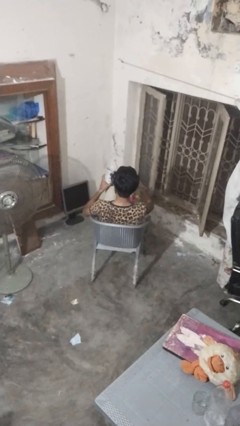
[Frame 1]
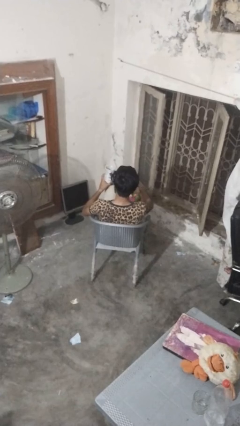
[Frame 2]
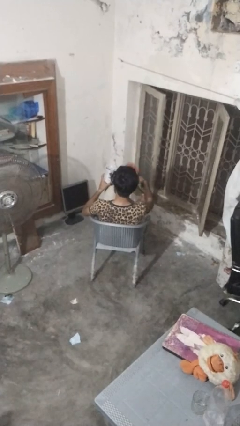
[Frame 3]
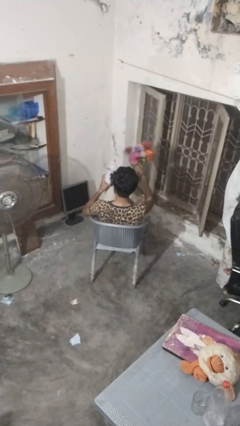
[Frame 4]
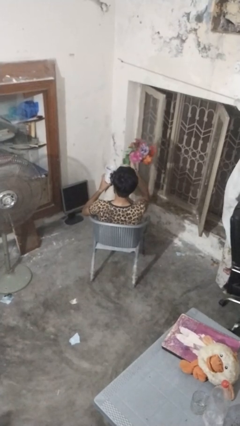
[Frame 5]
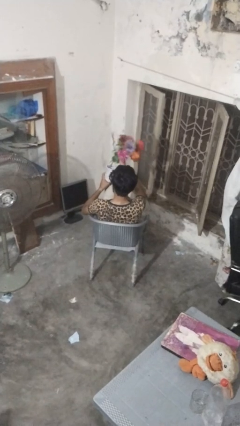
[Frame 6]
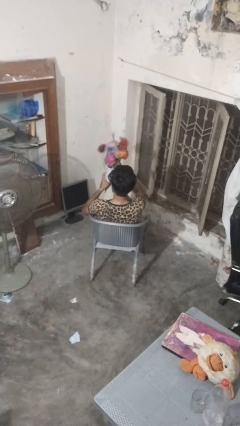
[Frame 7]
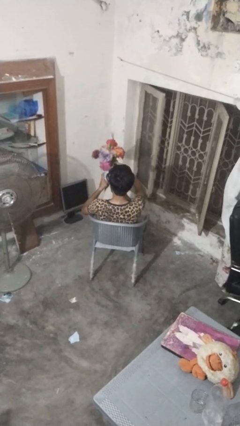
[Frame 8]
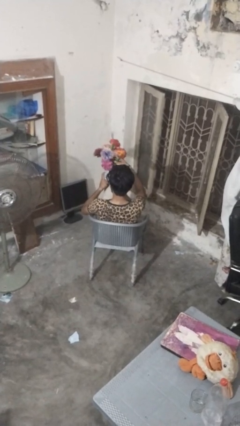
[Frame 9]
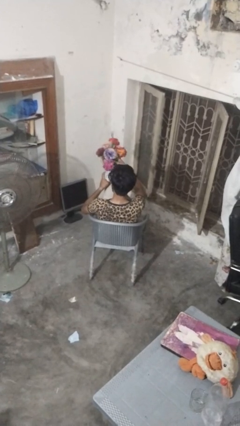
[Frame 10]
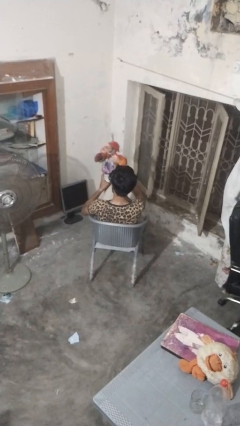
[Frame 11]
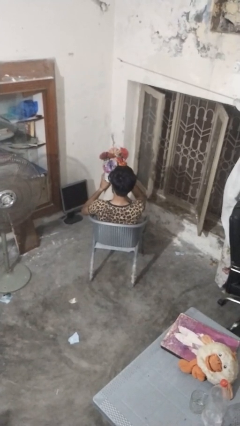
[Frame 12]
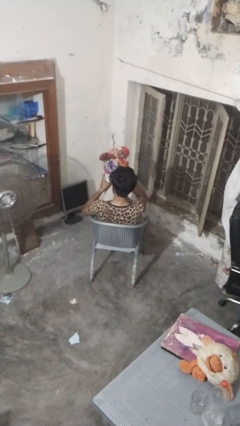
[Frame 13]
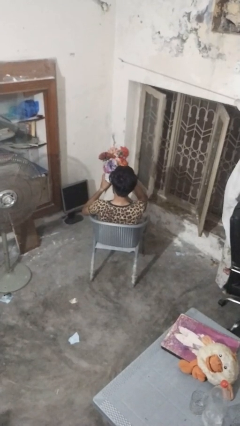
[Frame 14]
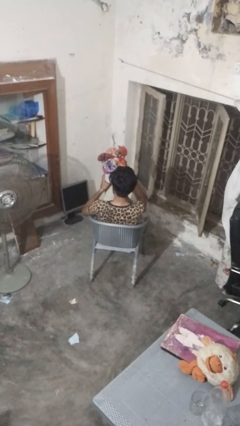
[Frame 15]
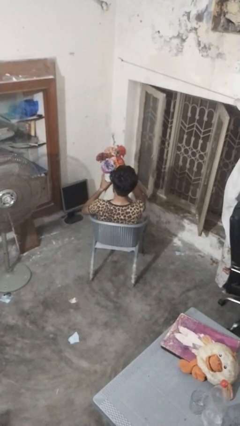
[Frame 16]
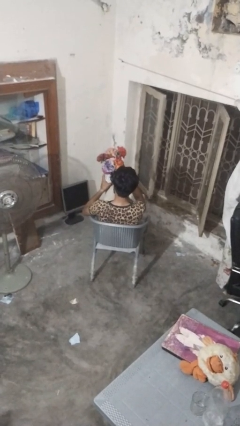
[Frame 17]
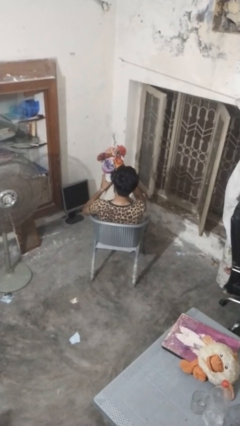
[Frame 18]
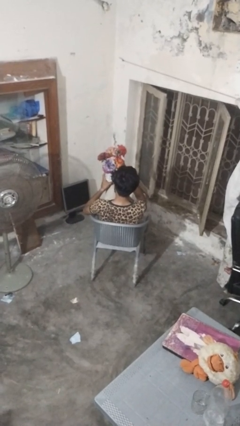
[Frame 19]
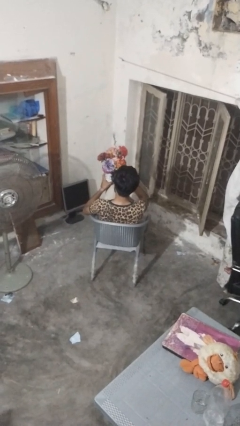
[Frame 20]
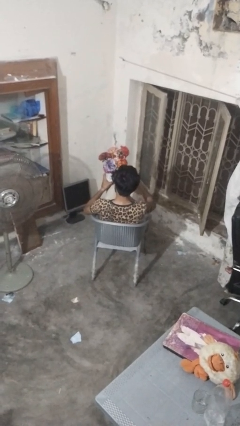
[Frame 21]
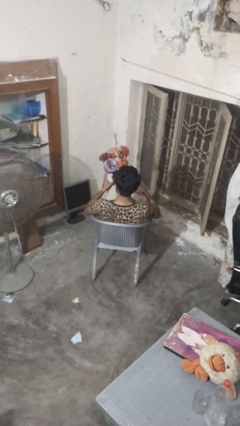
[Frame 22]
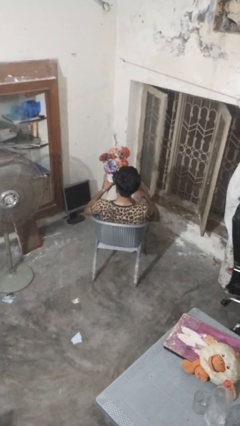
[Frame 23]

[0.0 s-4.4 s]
person arranges flowers in vase

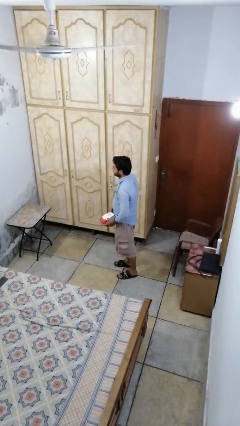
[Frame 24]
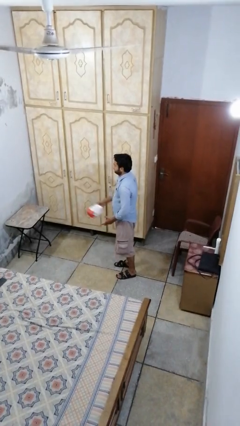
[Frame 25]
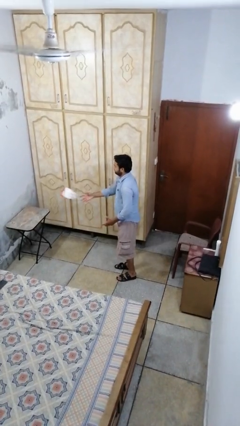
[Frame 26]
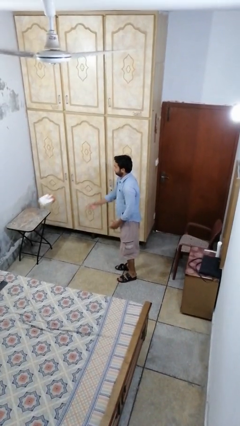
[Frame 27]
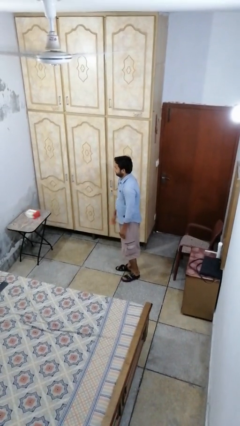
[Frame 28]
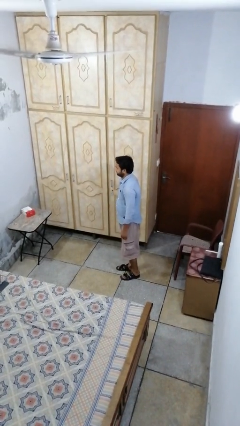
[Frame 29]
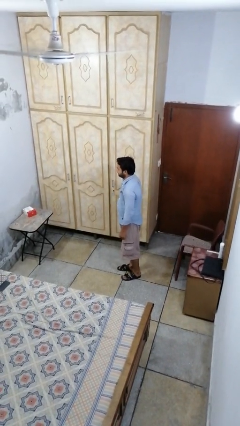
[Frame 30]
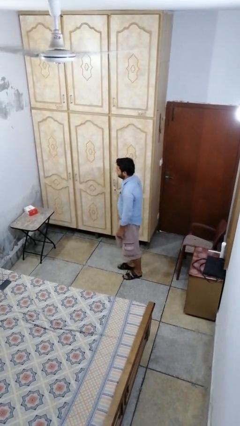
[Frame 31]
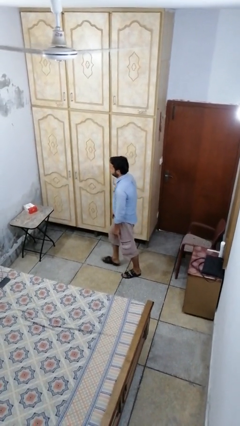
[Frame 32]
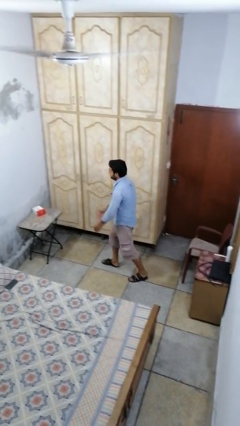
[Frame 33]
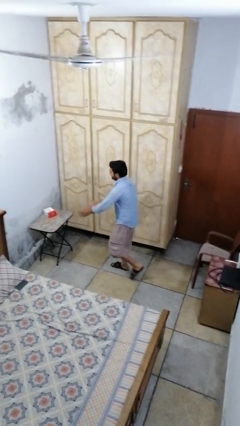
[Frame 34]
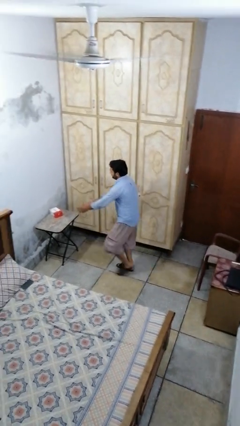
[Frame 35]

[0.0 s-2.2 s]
person throws object on table

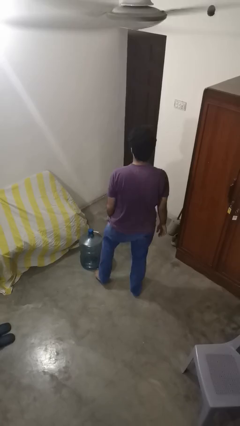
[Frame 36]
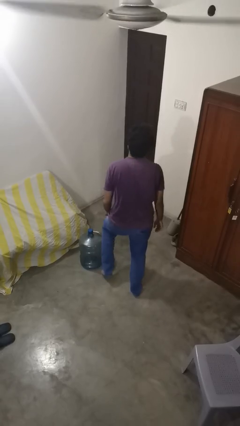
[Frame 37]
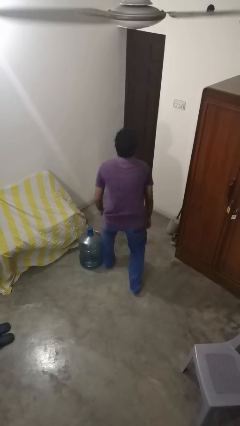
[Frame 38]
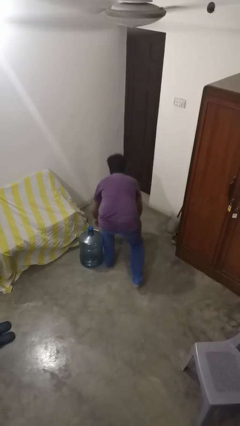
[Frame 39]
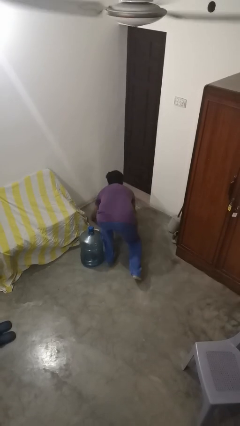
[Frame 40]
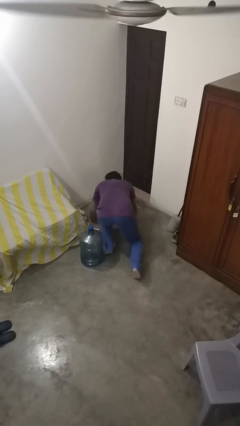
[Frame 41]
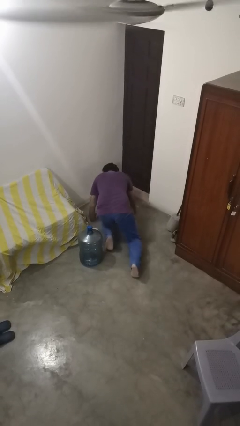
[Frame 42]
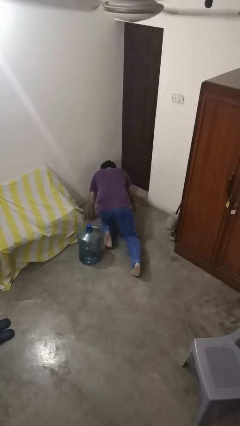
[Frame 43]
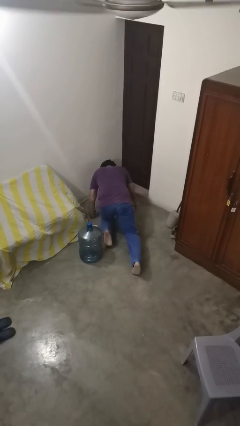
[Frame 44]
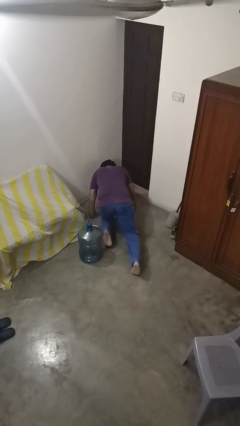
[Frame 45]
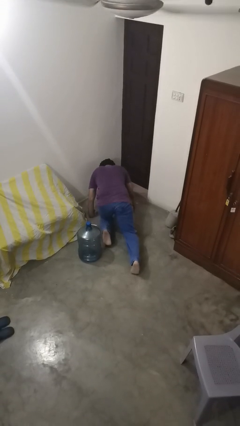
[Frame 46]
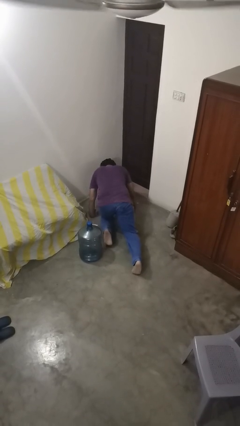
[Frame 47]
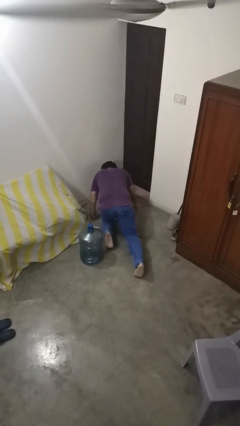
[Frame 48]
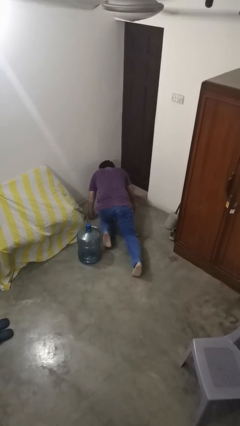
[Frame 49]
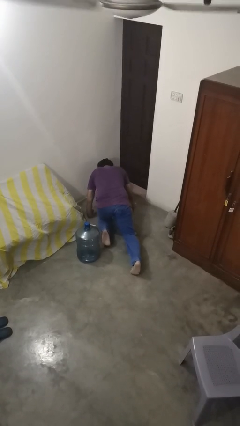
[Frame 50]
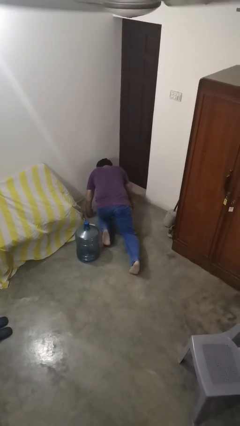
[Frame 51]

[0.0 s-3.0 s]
person lies down on floor

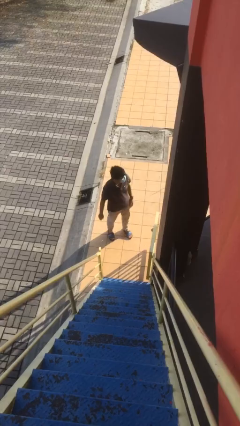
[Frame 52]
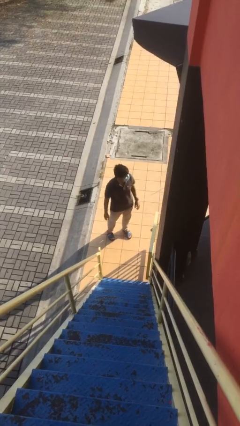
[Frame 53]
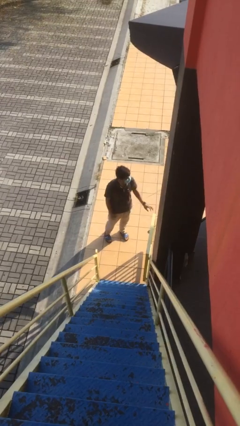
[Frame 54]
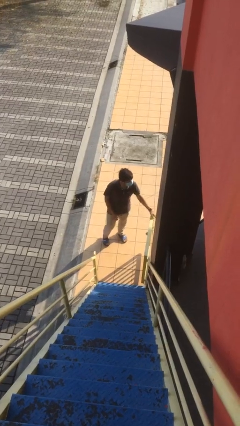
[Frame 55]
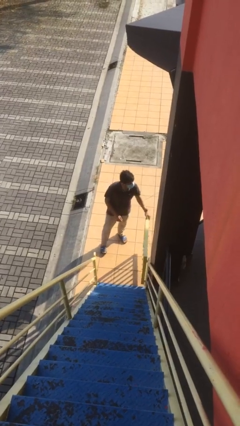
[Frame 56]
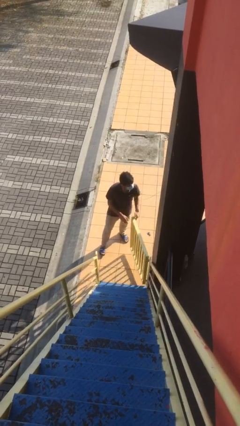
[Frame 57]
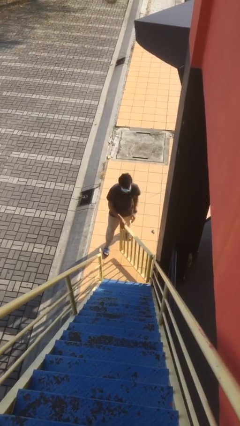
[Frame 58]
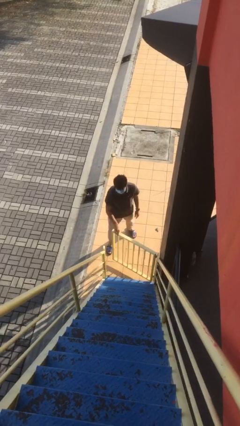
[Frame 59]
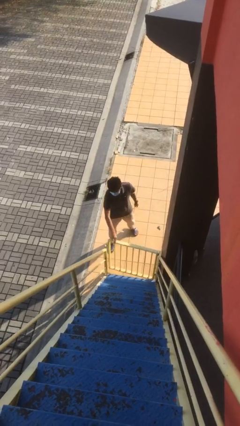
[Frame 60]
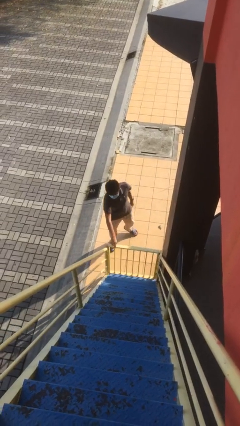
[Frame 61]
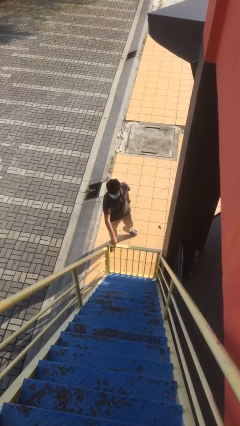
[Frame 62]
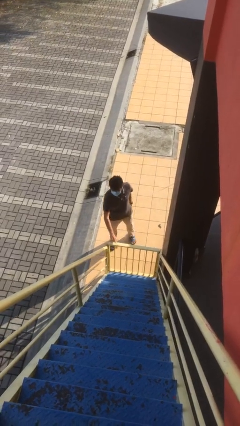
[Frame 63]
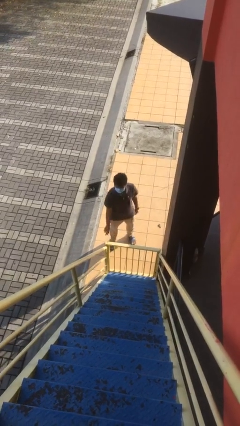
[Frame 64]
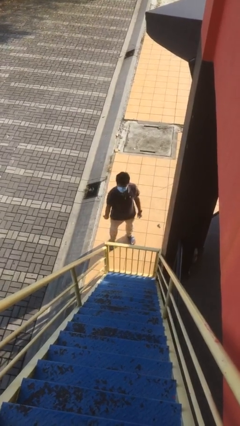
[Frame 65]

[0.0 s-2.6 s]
person closes facility door

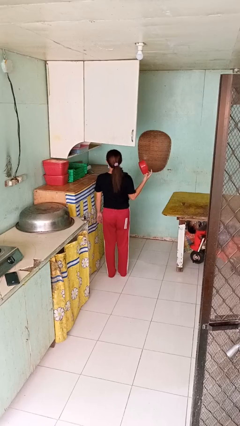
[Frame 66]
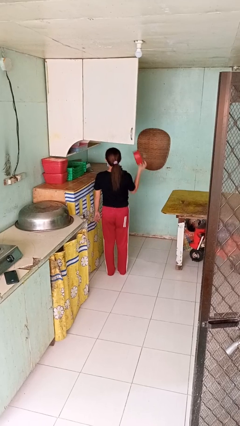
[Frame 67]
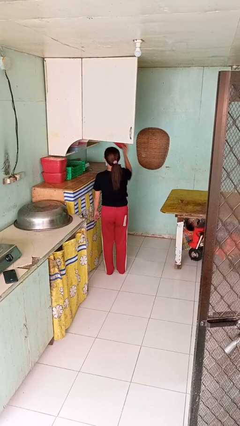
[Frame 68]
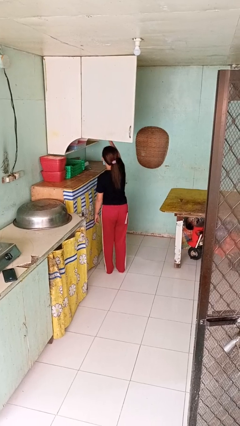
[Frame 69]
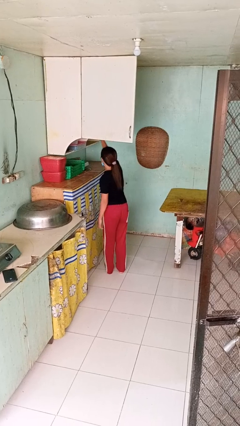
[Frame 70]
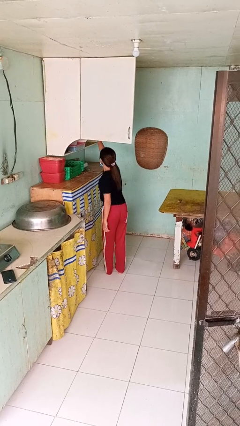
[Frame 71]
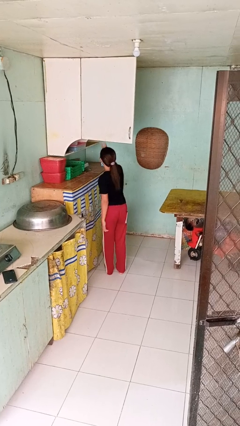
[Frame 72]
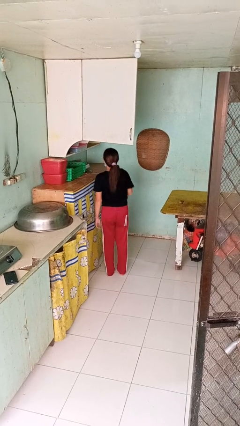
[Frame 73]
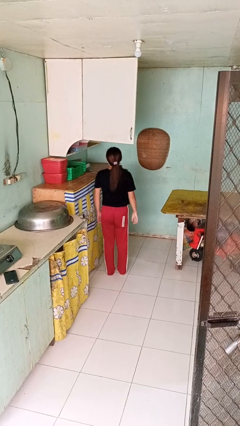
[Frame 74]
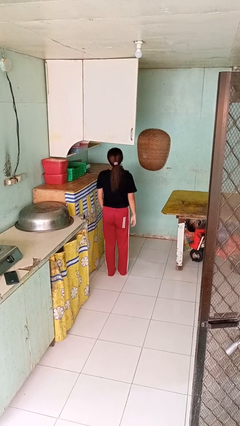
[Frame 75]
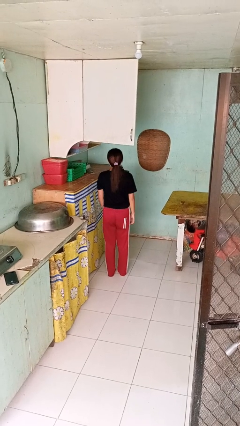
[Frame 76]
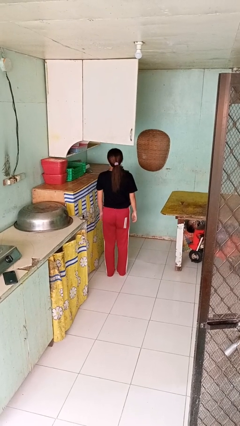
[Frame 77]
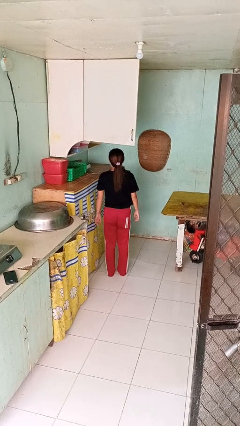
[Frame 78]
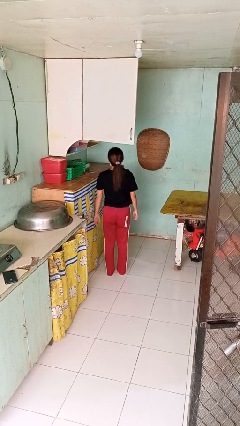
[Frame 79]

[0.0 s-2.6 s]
person puts object in cabinet

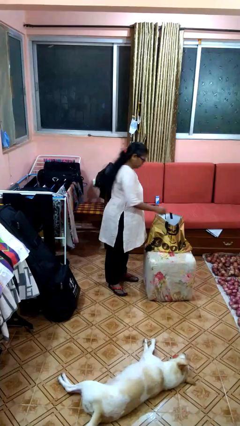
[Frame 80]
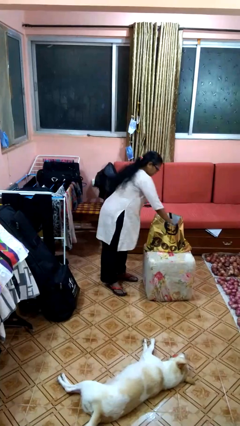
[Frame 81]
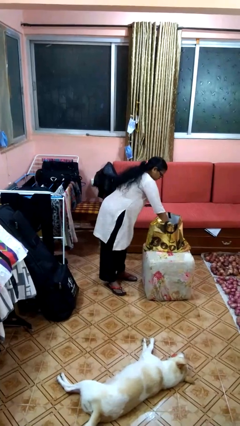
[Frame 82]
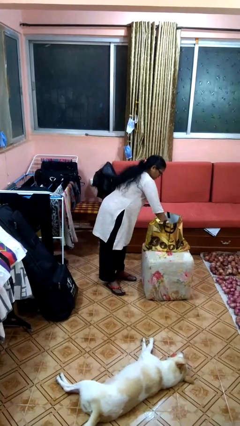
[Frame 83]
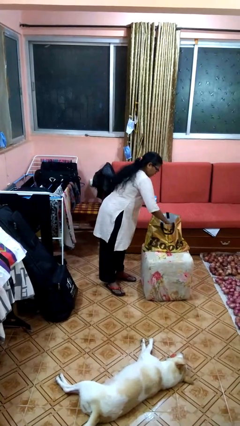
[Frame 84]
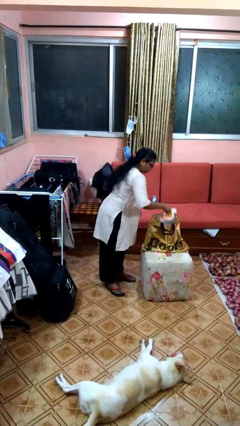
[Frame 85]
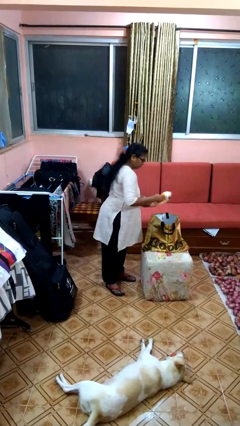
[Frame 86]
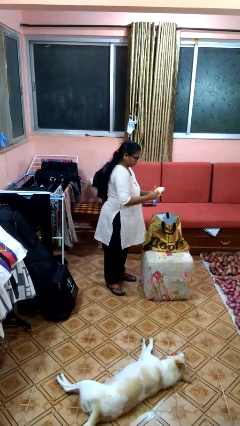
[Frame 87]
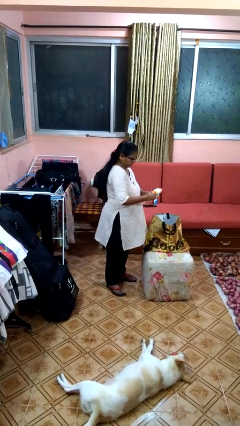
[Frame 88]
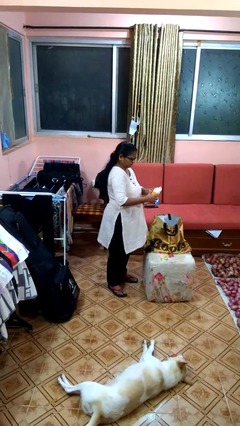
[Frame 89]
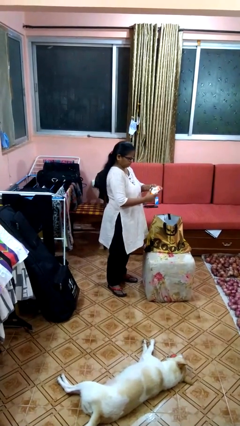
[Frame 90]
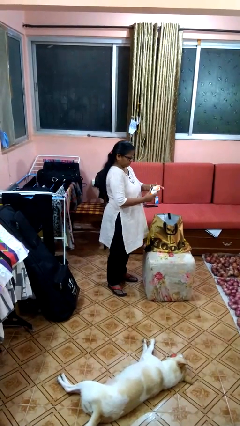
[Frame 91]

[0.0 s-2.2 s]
person takes object from bag
